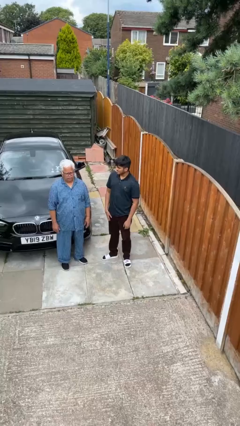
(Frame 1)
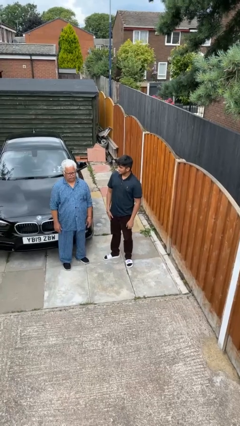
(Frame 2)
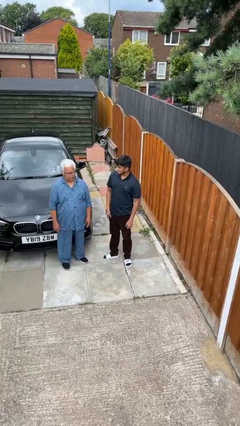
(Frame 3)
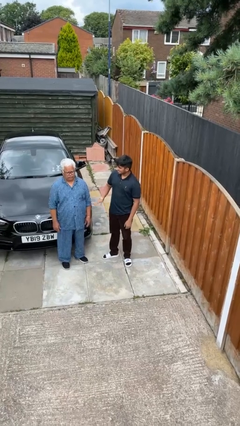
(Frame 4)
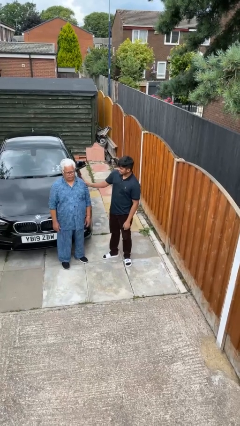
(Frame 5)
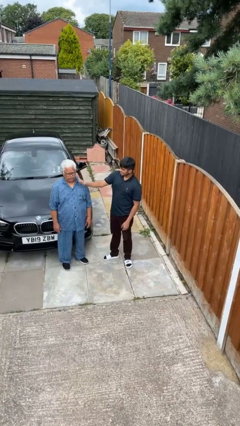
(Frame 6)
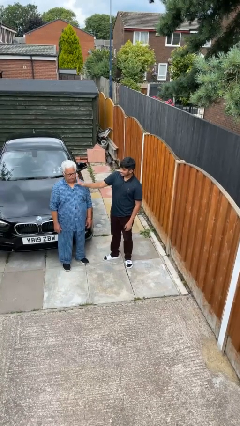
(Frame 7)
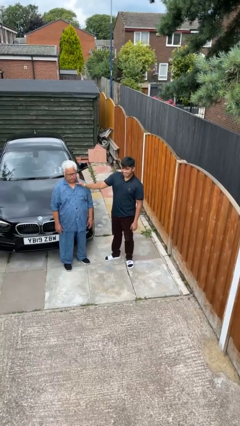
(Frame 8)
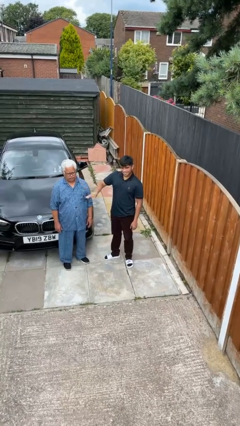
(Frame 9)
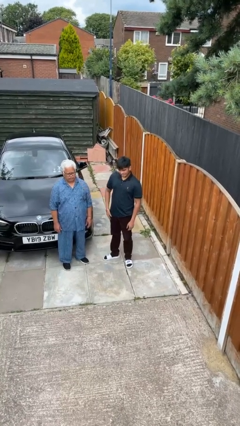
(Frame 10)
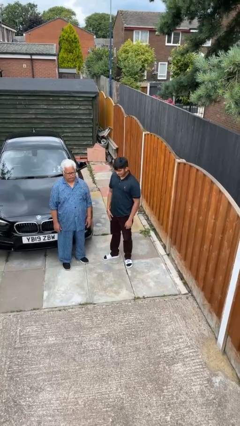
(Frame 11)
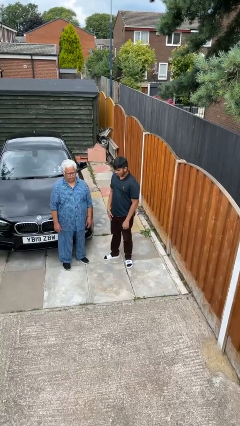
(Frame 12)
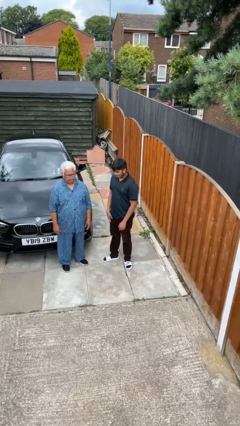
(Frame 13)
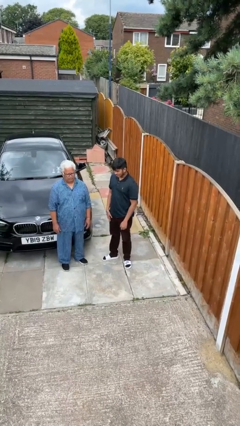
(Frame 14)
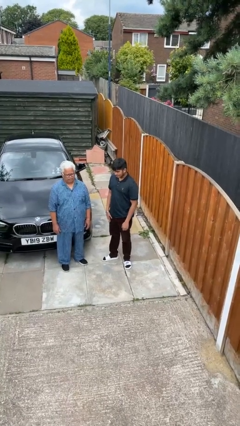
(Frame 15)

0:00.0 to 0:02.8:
person touches face of person

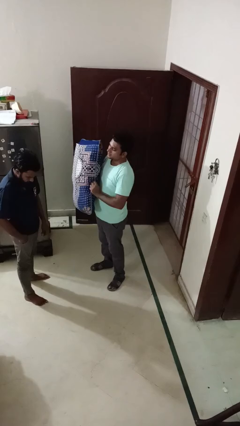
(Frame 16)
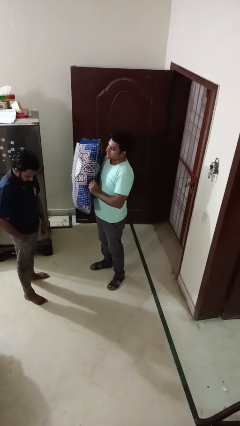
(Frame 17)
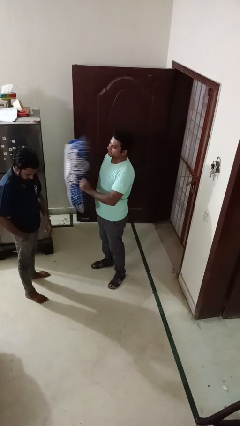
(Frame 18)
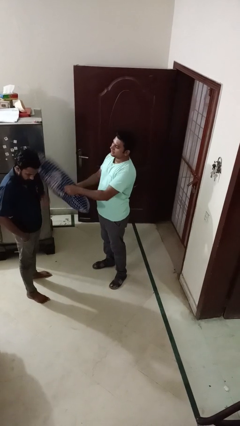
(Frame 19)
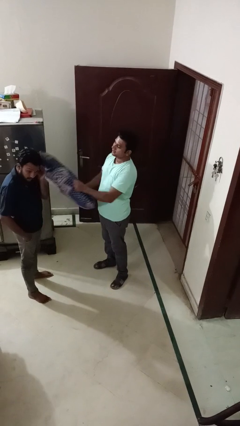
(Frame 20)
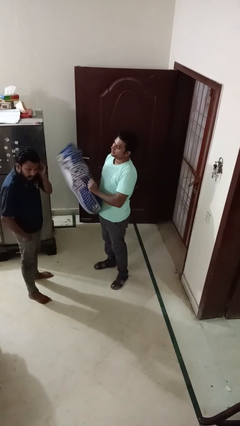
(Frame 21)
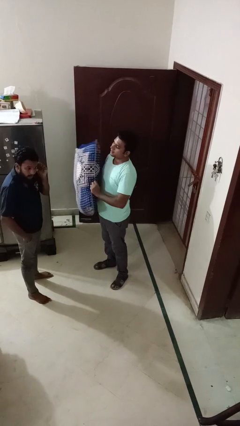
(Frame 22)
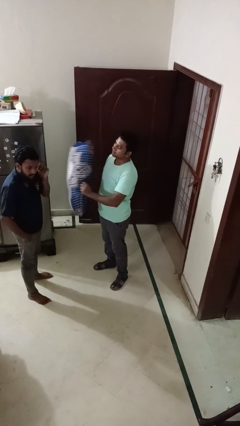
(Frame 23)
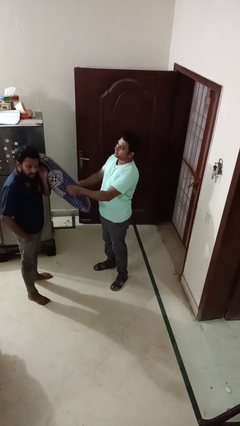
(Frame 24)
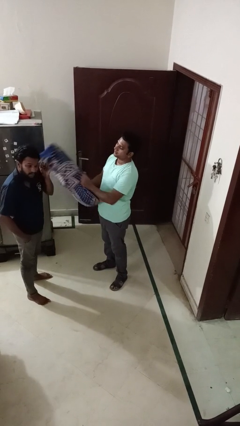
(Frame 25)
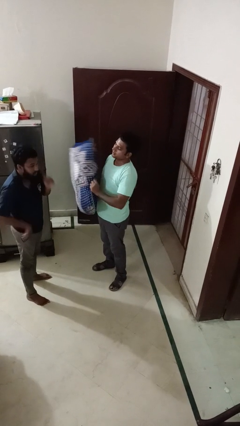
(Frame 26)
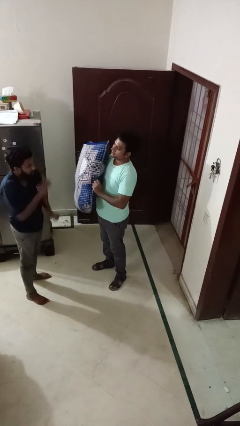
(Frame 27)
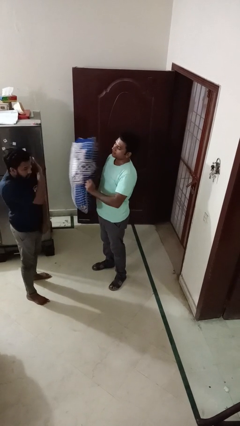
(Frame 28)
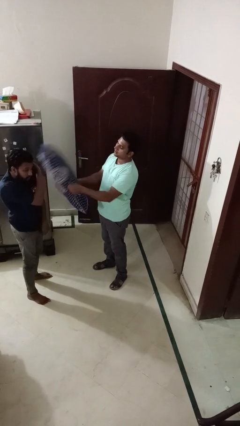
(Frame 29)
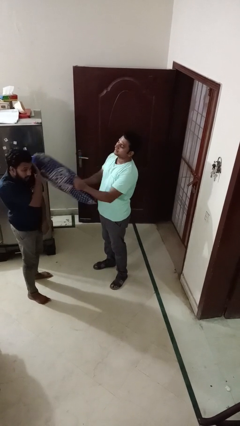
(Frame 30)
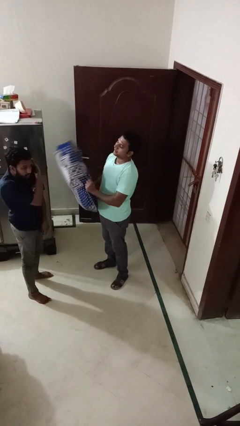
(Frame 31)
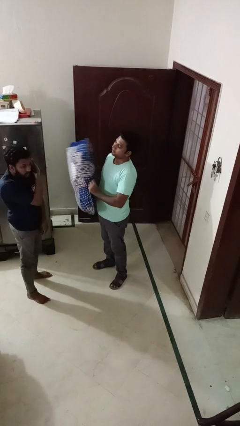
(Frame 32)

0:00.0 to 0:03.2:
person hits person with pillow

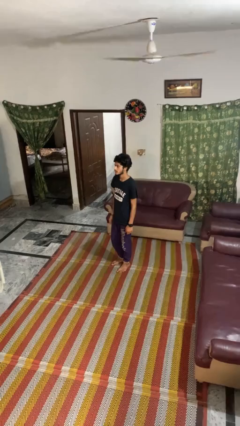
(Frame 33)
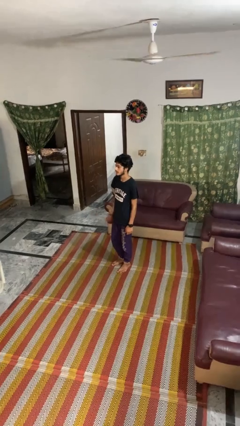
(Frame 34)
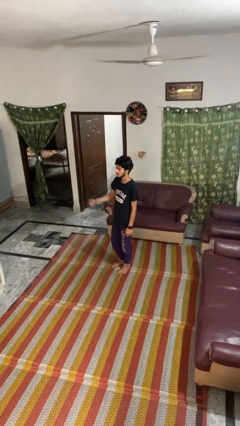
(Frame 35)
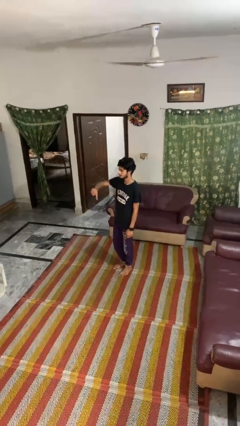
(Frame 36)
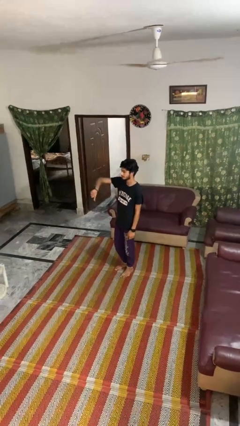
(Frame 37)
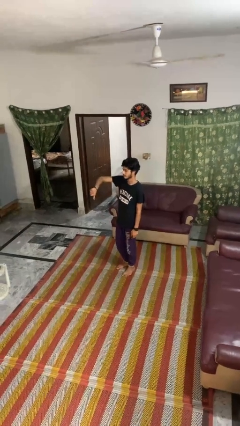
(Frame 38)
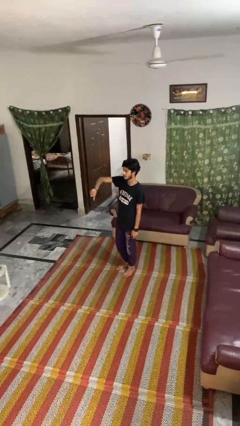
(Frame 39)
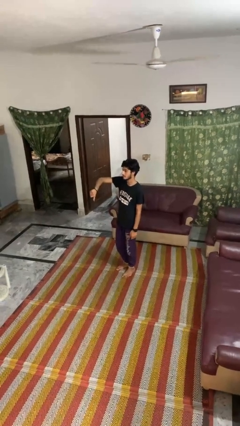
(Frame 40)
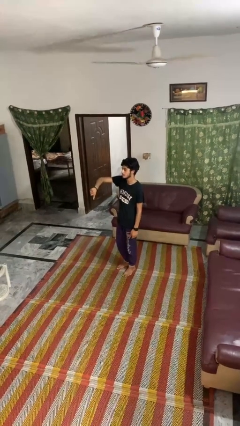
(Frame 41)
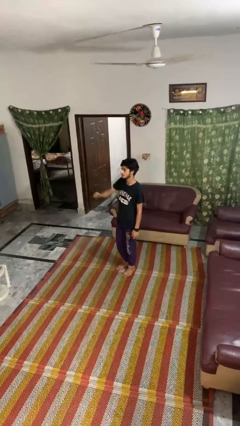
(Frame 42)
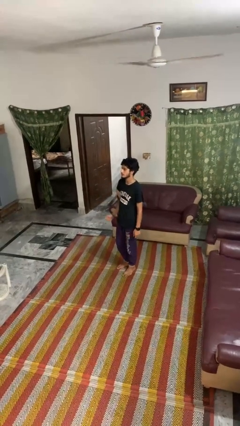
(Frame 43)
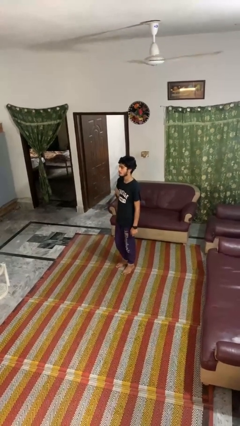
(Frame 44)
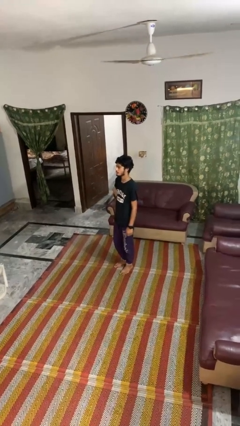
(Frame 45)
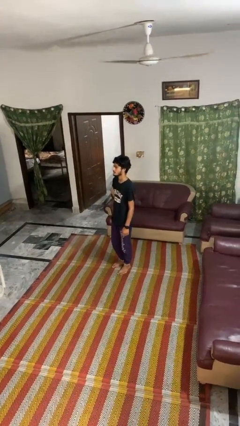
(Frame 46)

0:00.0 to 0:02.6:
person gestures thumbs down

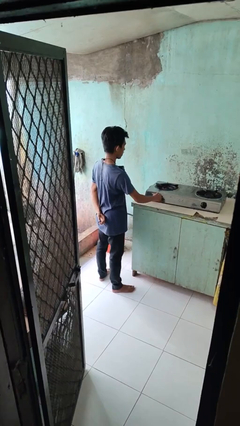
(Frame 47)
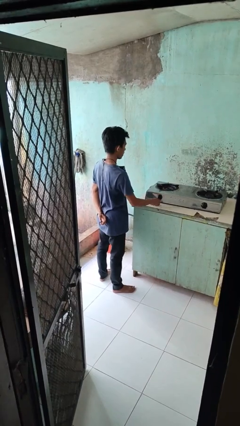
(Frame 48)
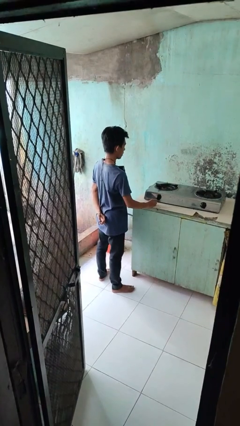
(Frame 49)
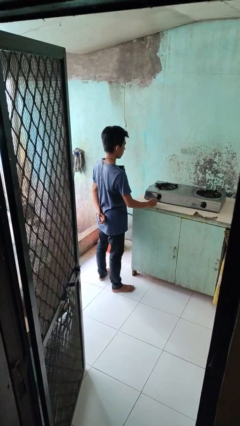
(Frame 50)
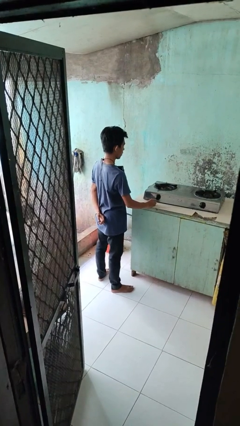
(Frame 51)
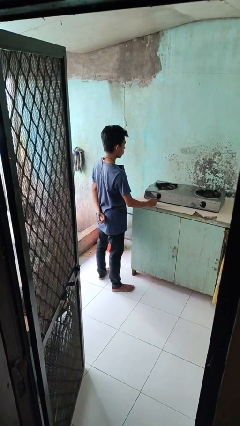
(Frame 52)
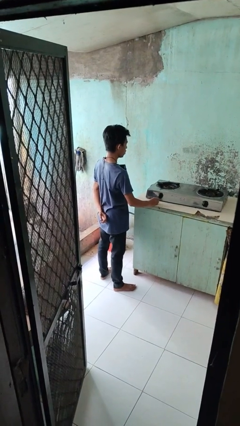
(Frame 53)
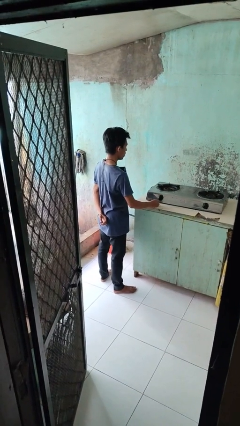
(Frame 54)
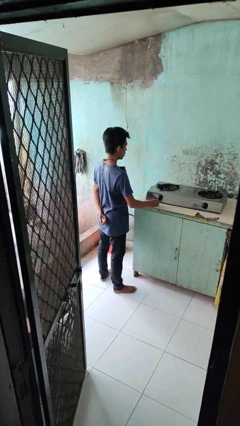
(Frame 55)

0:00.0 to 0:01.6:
person turns off stovetop

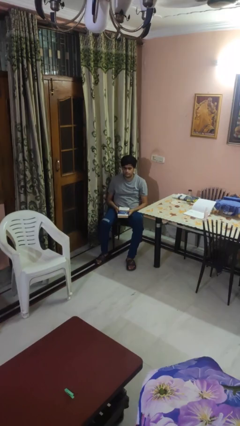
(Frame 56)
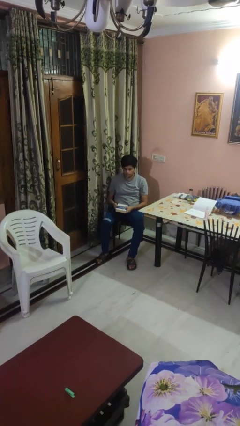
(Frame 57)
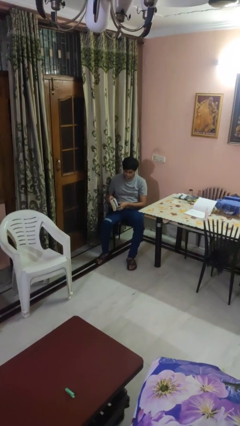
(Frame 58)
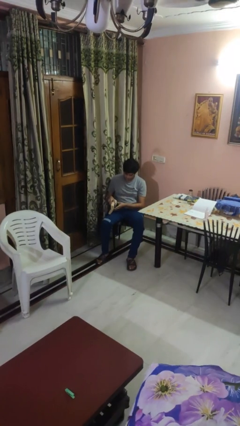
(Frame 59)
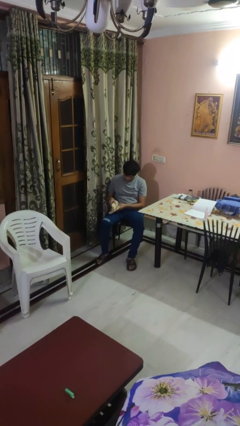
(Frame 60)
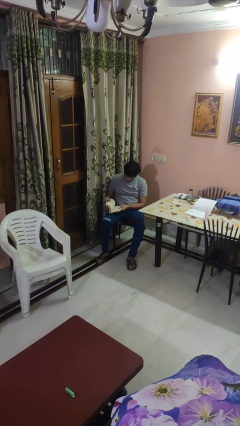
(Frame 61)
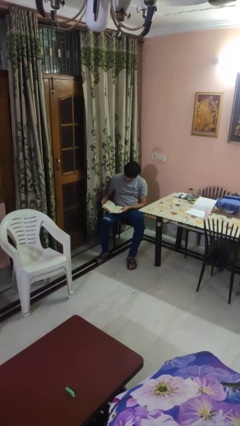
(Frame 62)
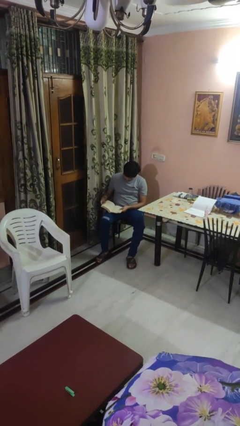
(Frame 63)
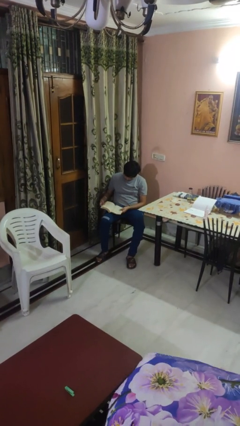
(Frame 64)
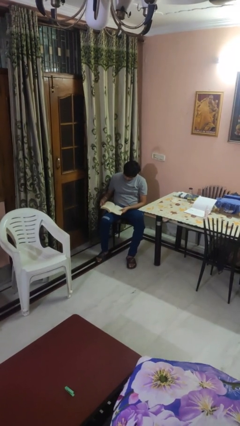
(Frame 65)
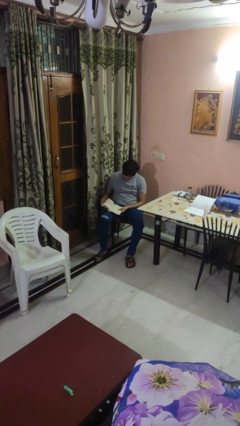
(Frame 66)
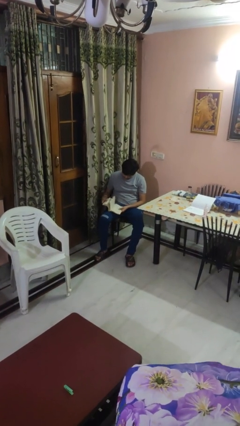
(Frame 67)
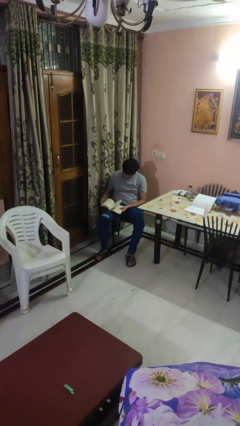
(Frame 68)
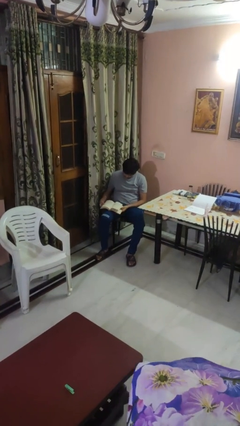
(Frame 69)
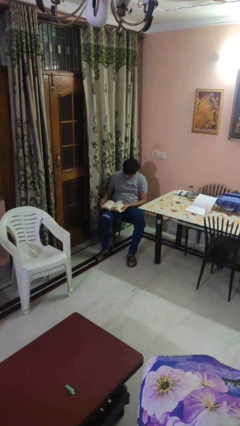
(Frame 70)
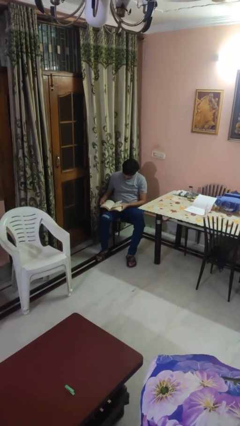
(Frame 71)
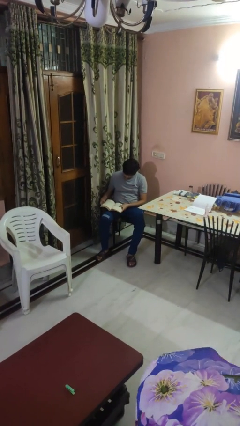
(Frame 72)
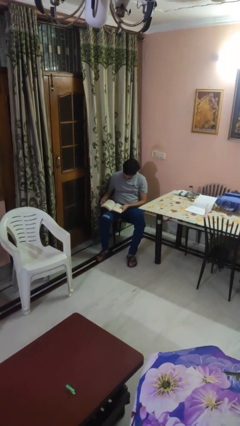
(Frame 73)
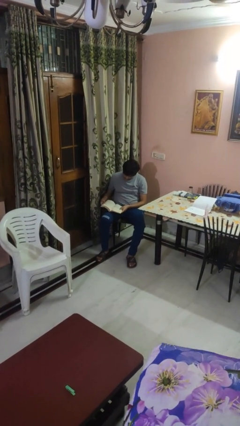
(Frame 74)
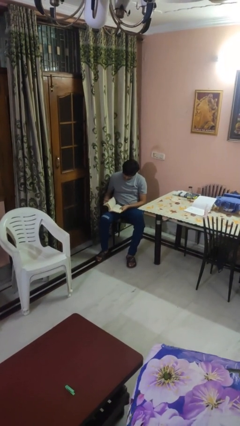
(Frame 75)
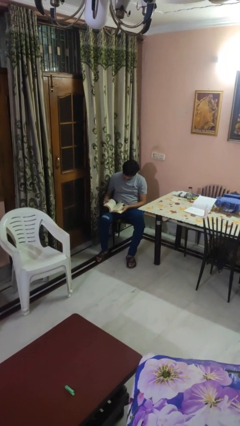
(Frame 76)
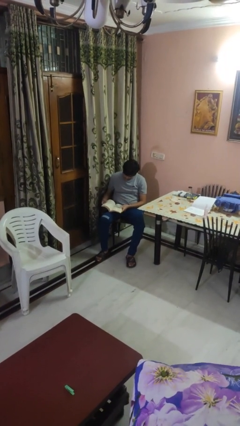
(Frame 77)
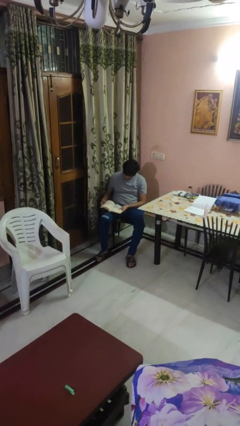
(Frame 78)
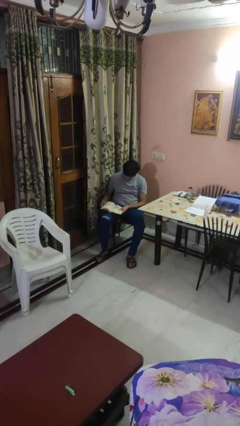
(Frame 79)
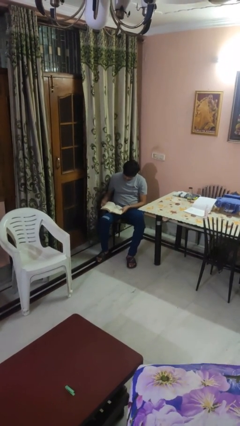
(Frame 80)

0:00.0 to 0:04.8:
person reads book

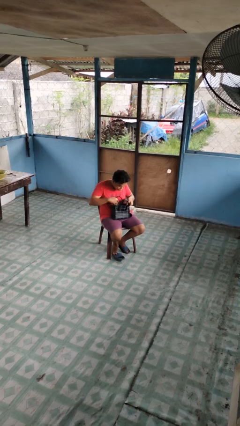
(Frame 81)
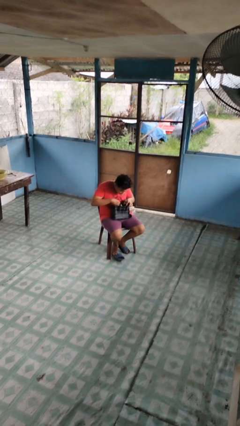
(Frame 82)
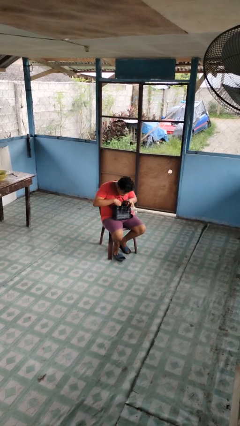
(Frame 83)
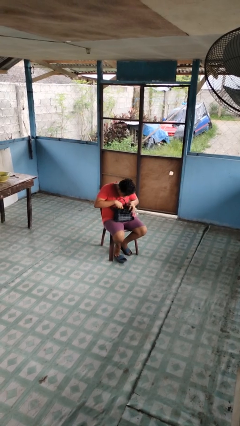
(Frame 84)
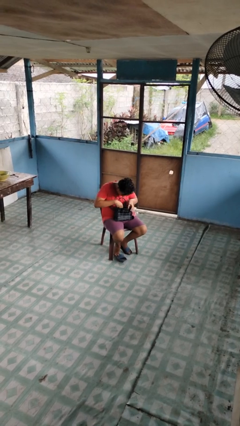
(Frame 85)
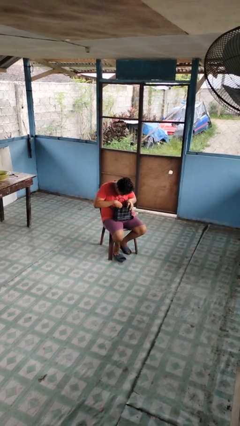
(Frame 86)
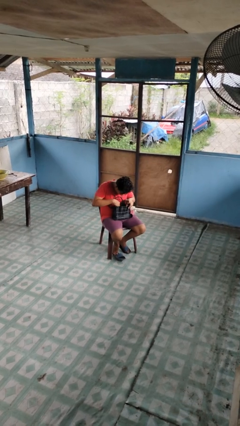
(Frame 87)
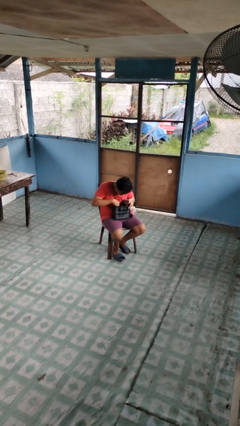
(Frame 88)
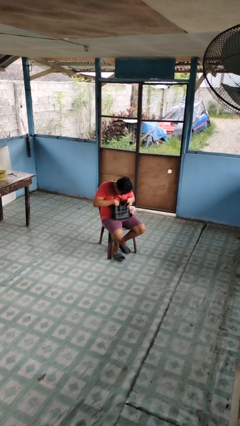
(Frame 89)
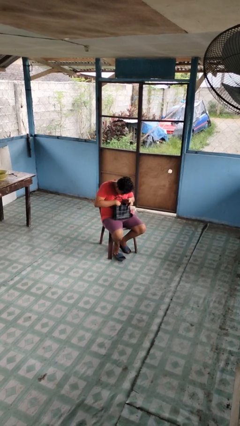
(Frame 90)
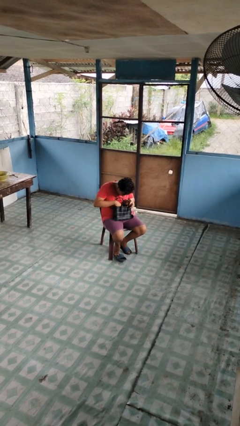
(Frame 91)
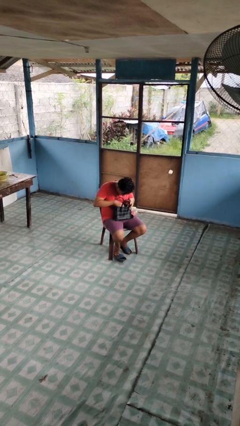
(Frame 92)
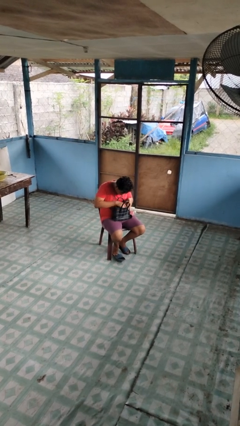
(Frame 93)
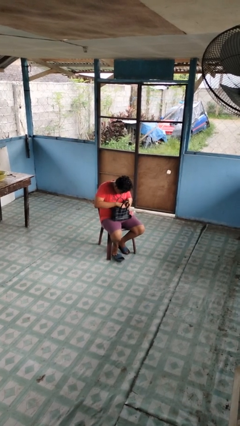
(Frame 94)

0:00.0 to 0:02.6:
person searches in purse
